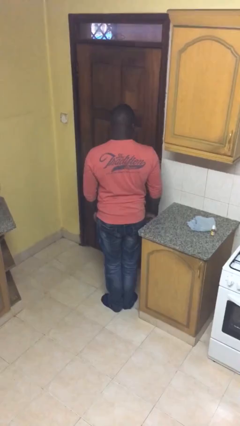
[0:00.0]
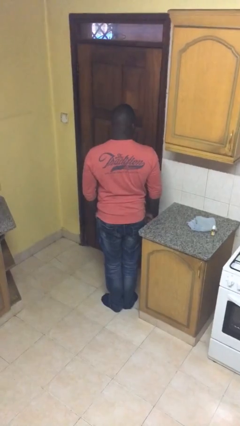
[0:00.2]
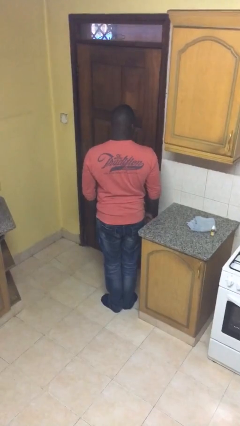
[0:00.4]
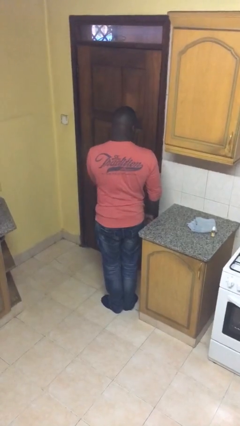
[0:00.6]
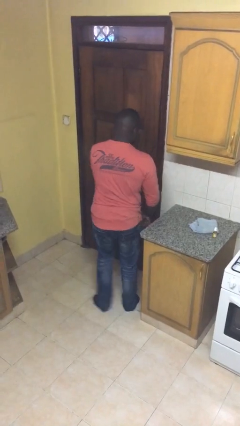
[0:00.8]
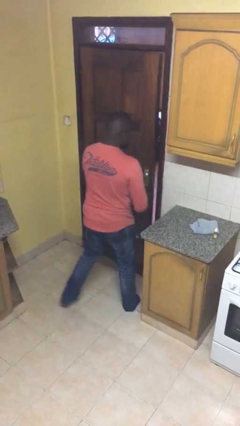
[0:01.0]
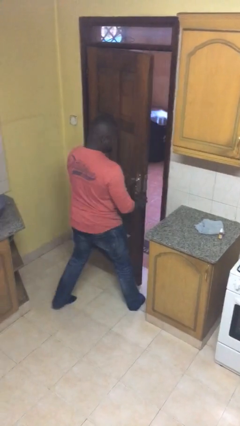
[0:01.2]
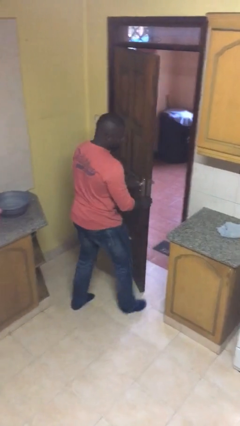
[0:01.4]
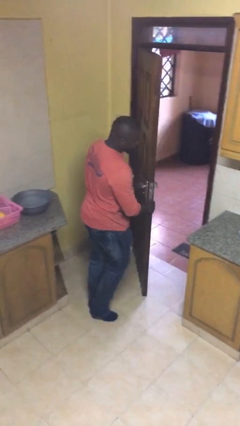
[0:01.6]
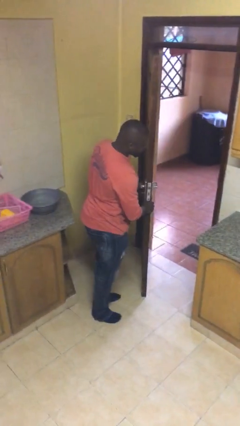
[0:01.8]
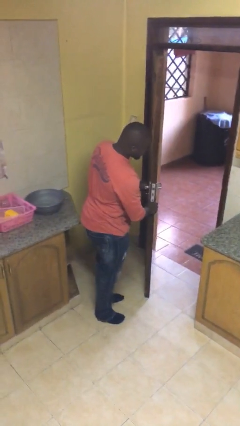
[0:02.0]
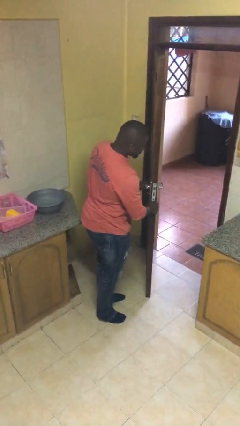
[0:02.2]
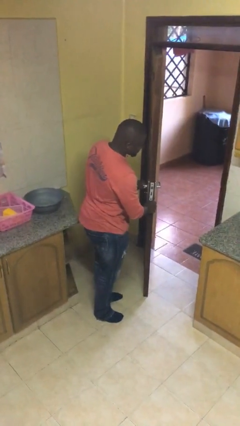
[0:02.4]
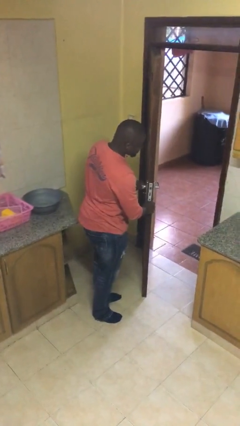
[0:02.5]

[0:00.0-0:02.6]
person opens facility door

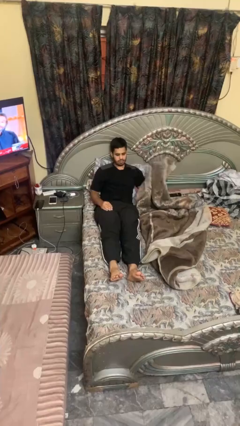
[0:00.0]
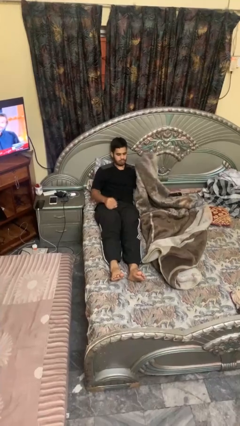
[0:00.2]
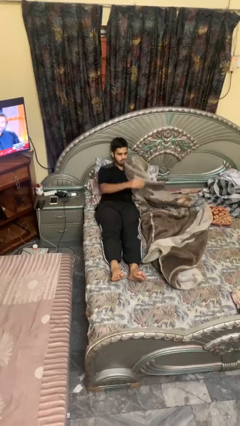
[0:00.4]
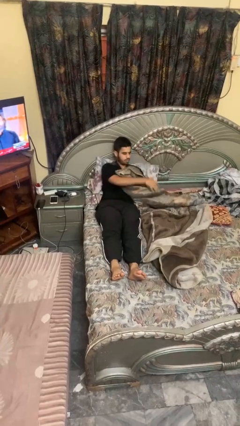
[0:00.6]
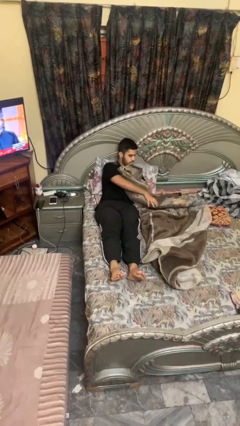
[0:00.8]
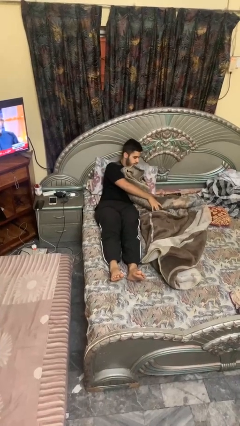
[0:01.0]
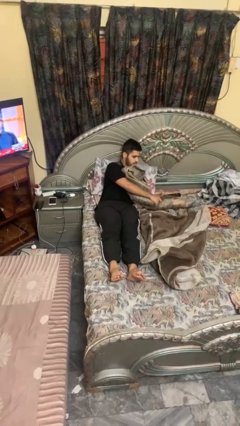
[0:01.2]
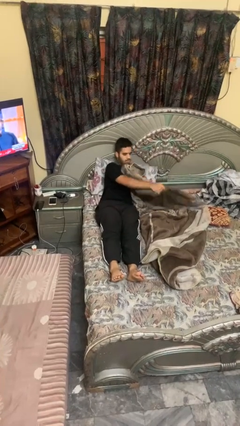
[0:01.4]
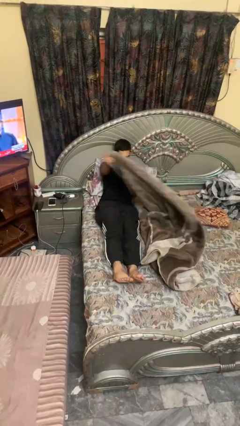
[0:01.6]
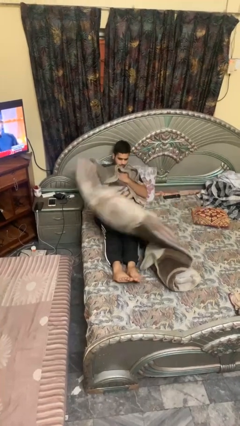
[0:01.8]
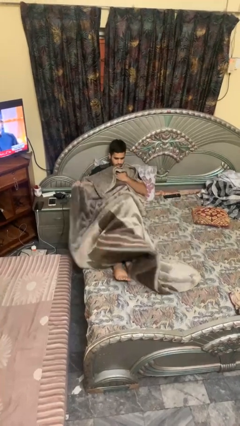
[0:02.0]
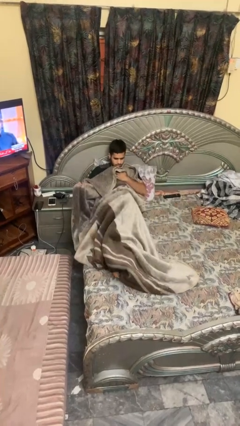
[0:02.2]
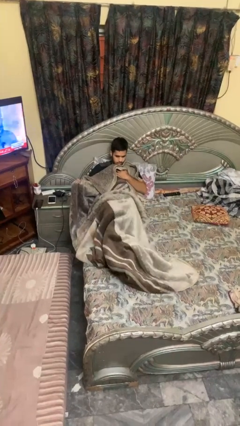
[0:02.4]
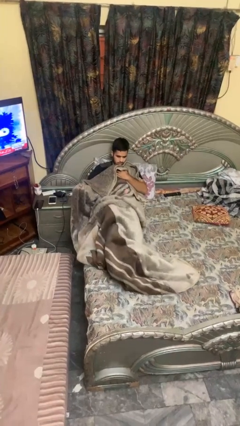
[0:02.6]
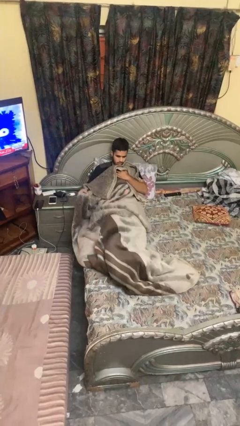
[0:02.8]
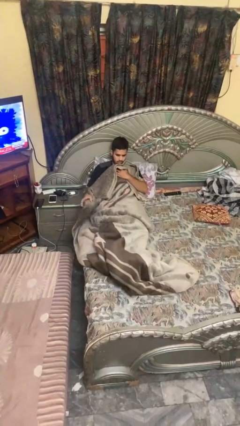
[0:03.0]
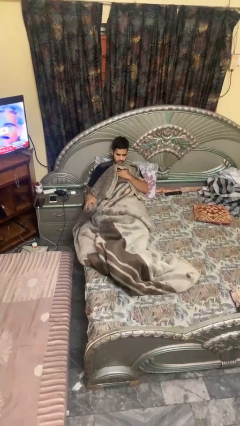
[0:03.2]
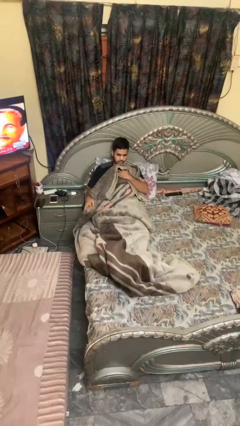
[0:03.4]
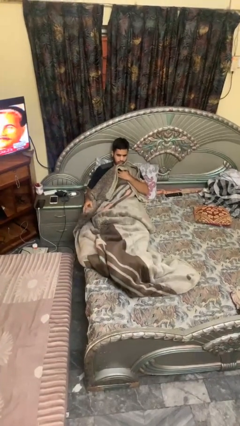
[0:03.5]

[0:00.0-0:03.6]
person covers with blanket

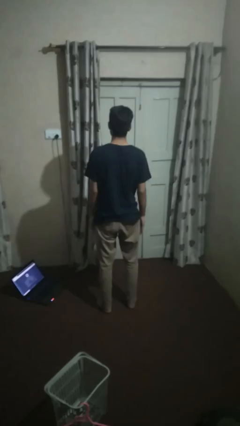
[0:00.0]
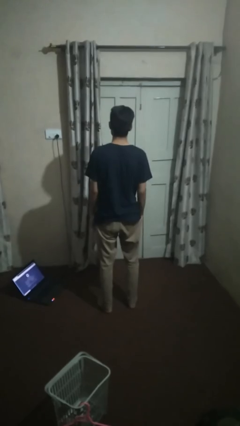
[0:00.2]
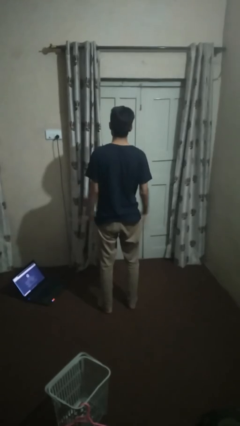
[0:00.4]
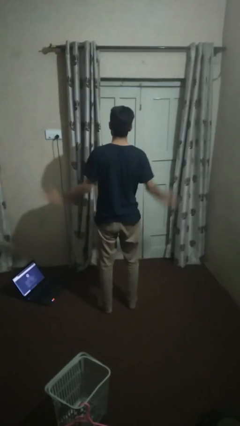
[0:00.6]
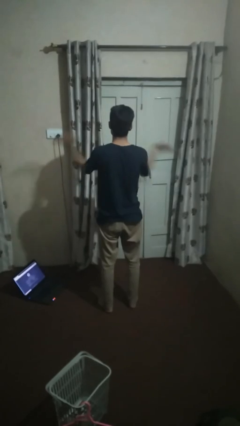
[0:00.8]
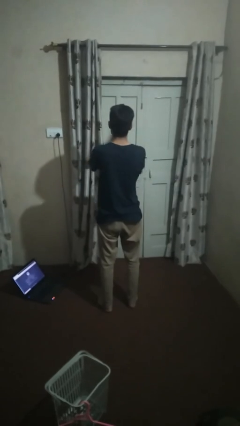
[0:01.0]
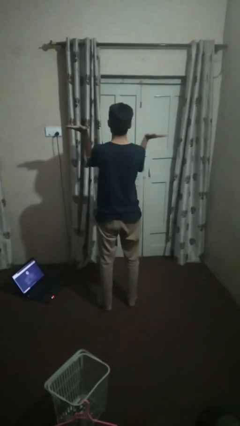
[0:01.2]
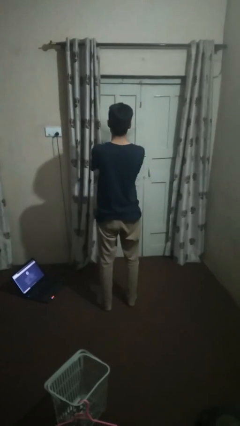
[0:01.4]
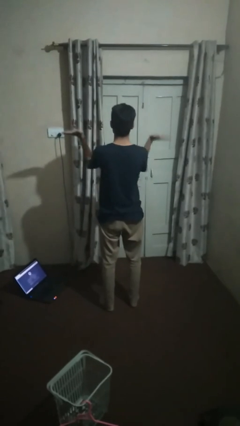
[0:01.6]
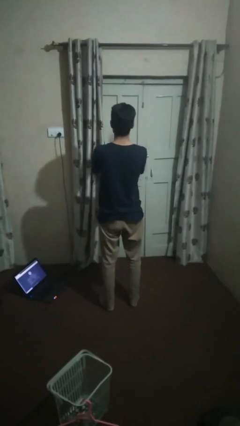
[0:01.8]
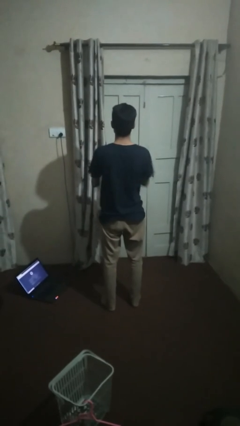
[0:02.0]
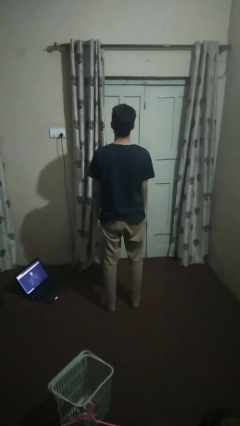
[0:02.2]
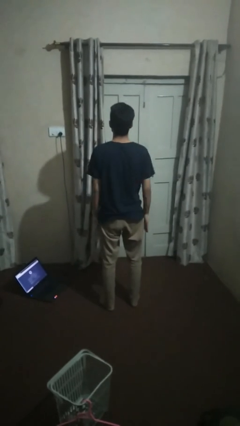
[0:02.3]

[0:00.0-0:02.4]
person claps hands

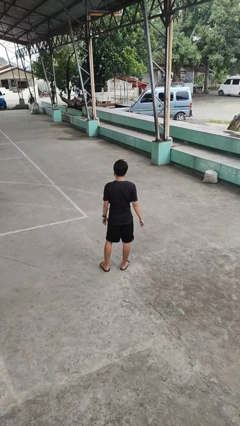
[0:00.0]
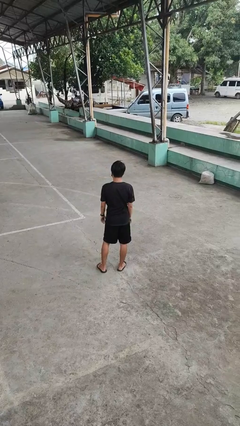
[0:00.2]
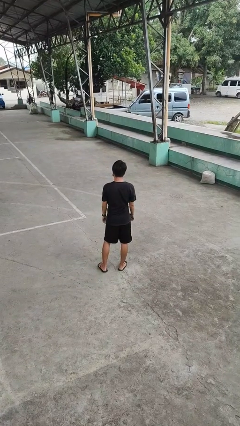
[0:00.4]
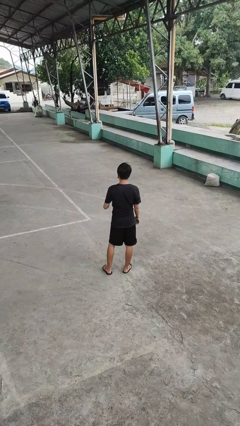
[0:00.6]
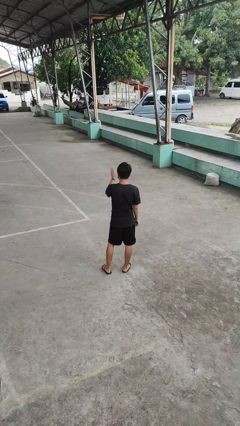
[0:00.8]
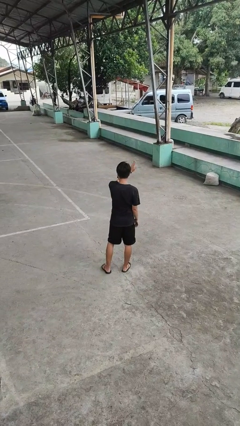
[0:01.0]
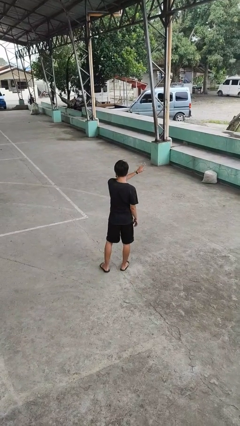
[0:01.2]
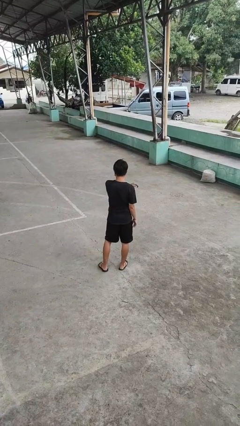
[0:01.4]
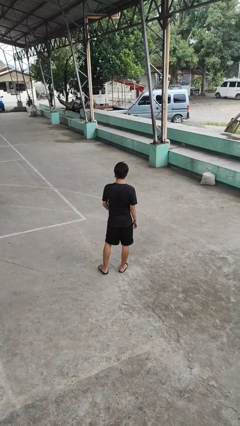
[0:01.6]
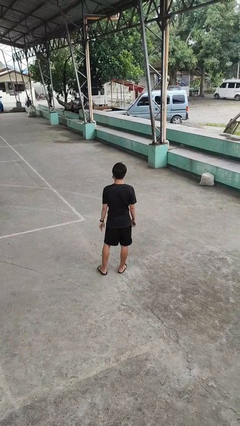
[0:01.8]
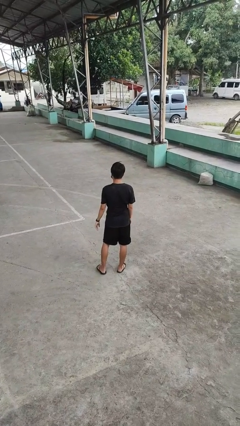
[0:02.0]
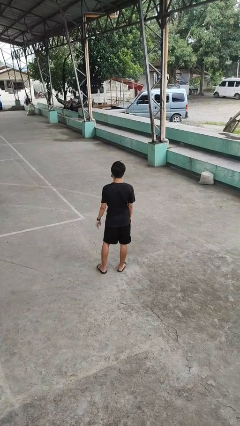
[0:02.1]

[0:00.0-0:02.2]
person gestures swipe right

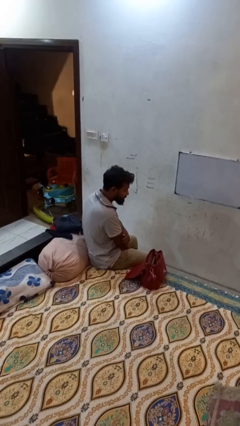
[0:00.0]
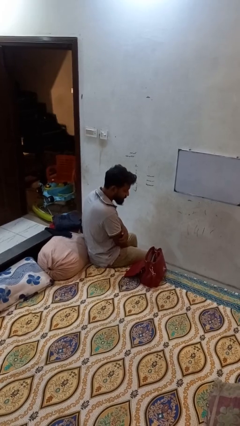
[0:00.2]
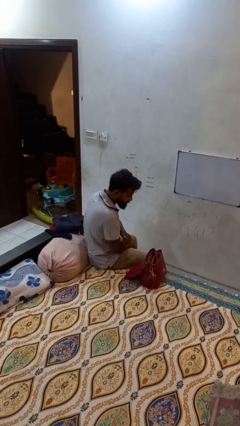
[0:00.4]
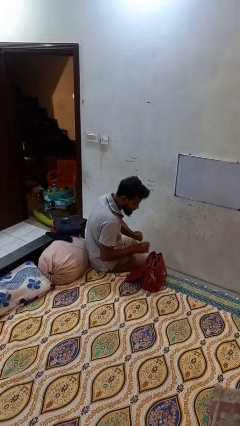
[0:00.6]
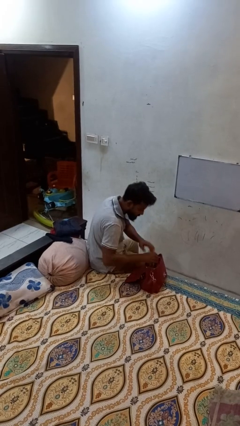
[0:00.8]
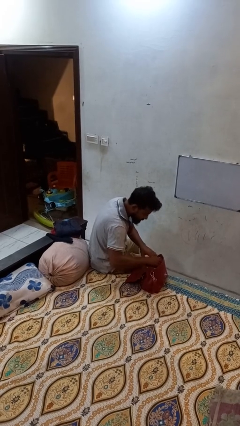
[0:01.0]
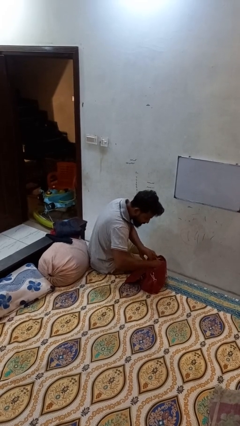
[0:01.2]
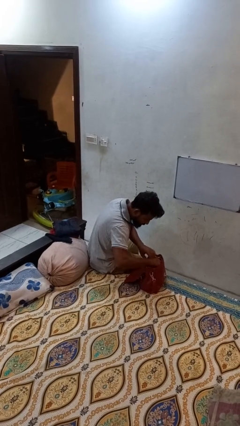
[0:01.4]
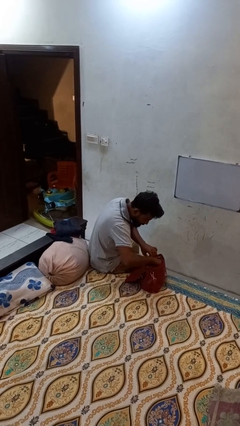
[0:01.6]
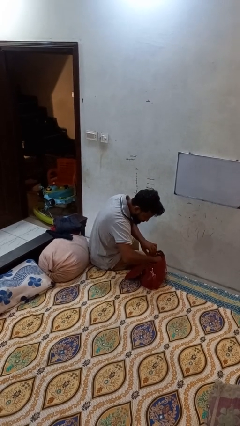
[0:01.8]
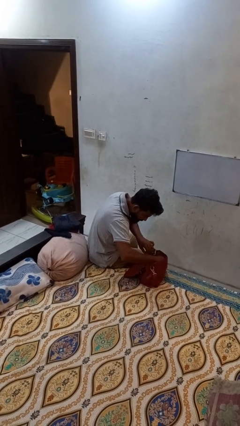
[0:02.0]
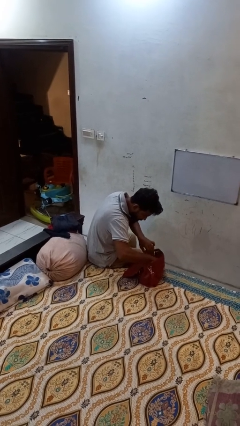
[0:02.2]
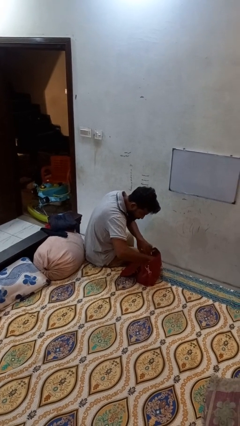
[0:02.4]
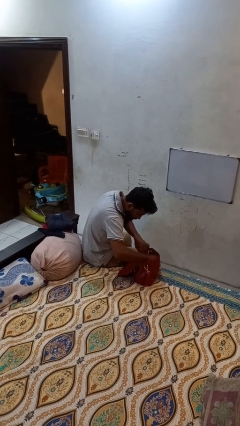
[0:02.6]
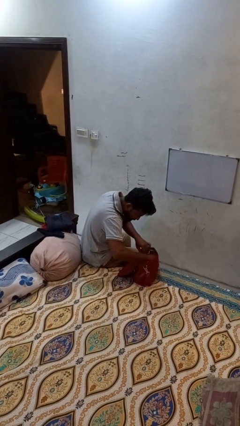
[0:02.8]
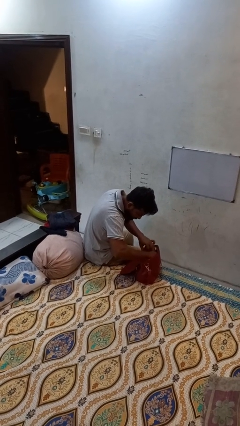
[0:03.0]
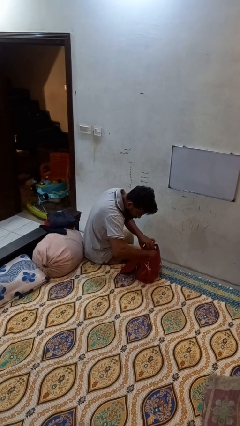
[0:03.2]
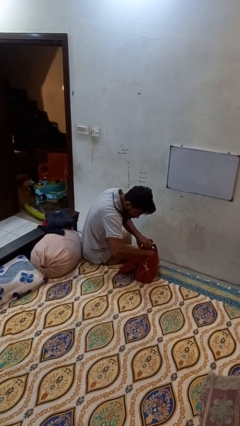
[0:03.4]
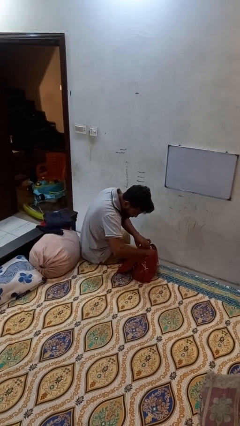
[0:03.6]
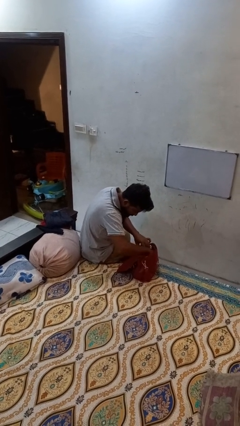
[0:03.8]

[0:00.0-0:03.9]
person searches in purse

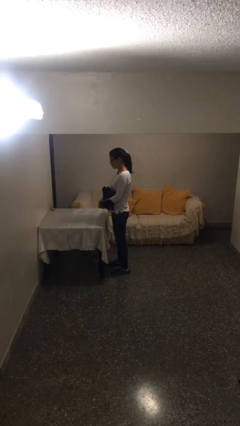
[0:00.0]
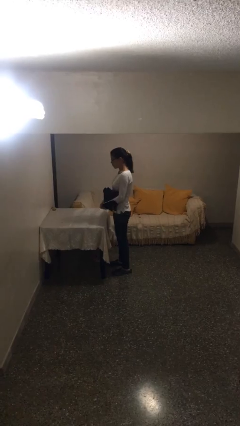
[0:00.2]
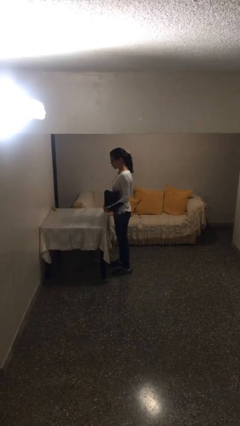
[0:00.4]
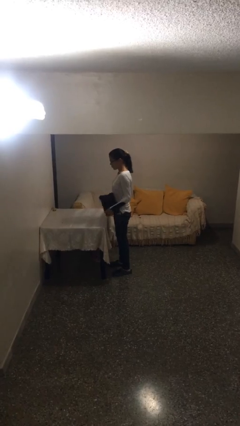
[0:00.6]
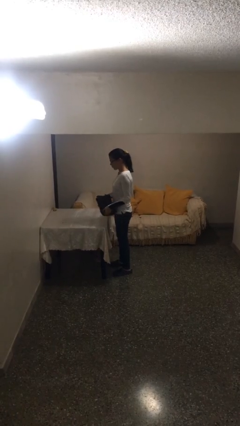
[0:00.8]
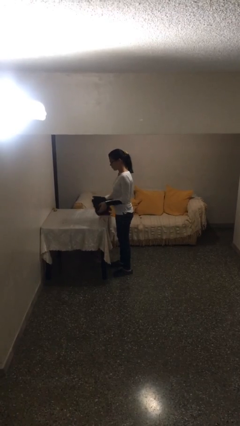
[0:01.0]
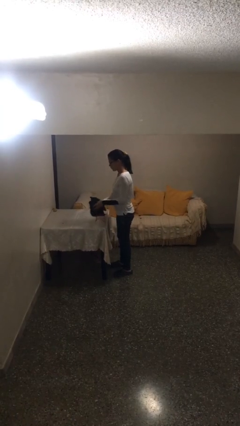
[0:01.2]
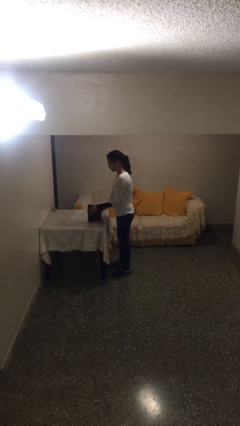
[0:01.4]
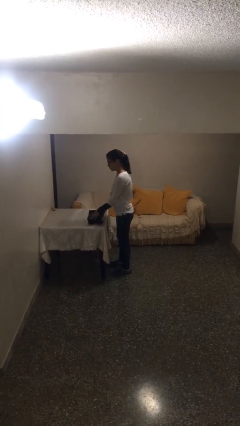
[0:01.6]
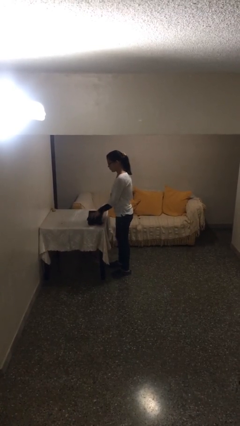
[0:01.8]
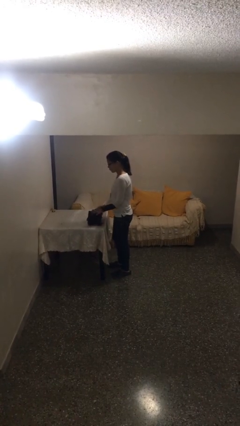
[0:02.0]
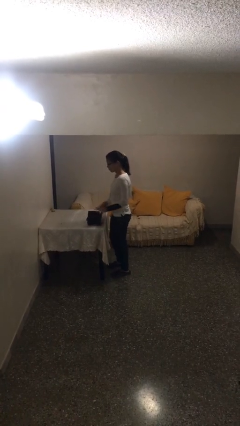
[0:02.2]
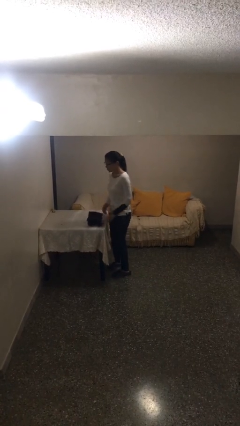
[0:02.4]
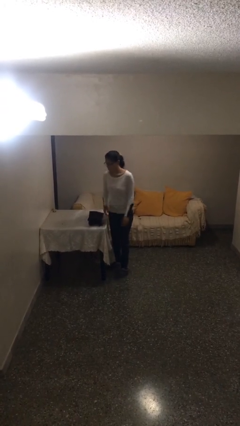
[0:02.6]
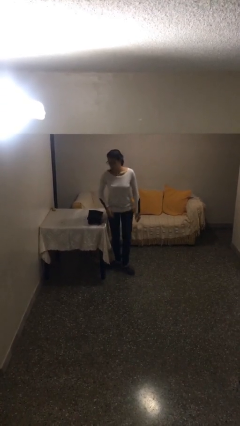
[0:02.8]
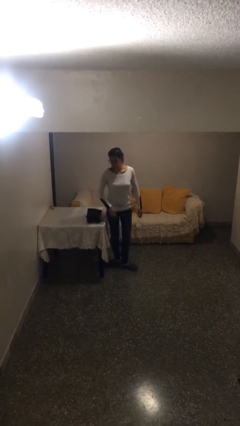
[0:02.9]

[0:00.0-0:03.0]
person puts down object on table
